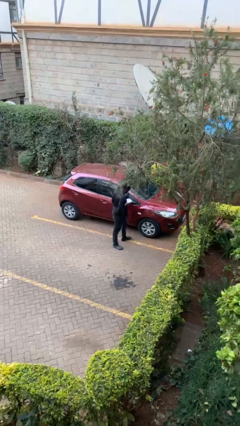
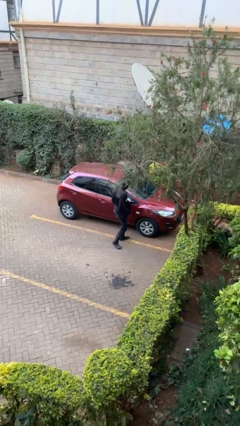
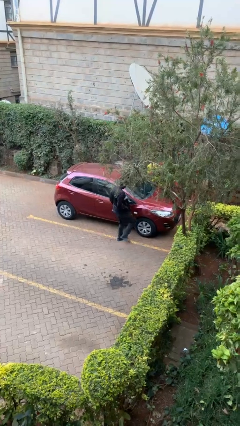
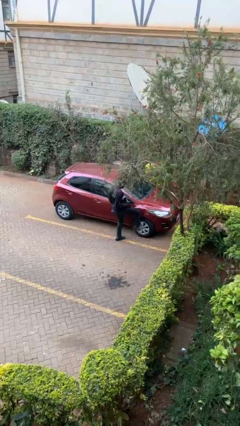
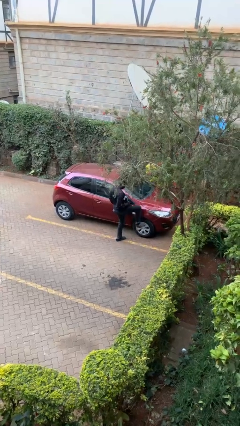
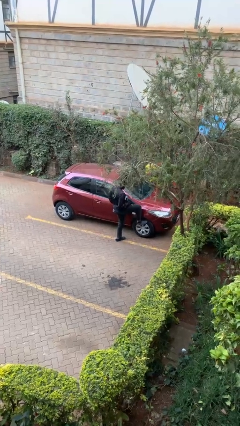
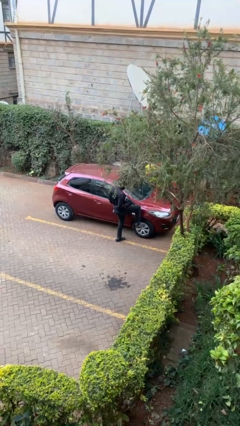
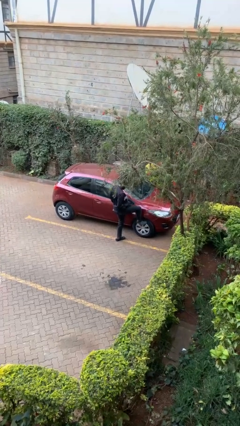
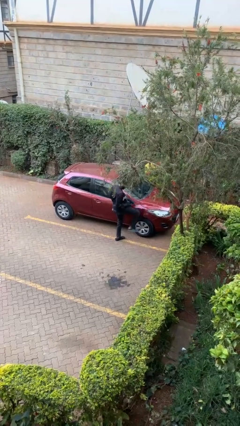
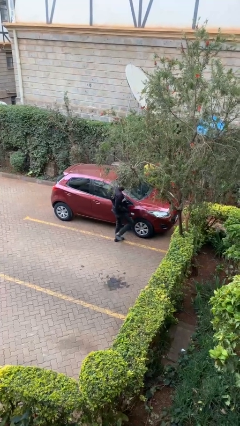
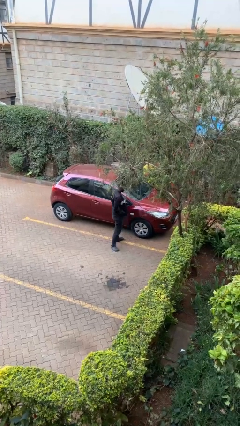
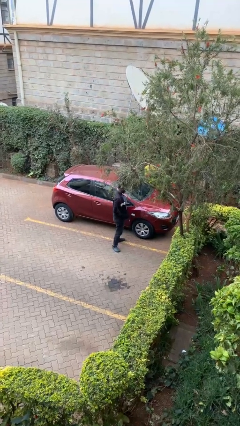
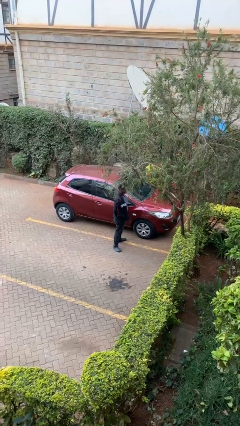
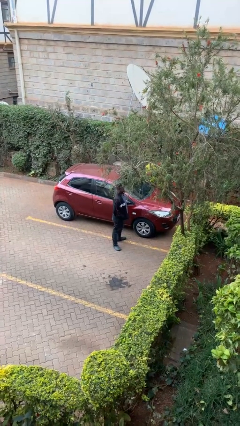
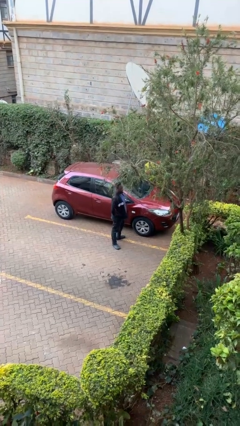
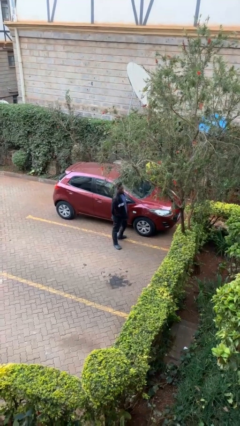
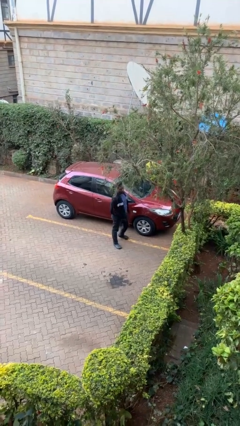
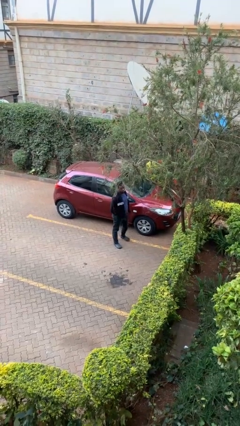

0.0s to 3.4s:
person kicks car tires

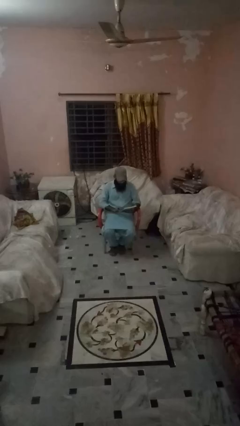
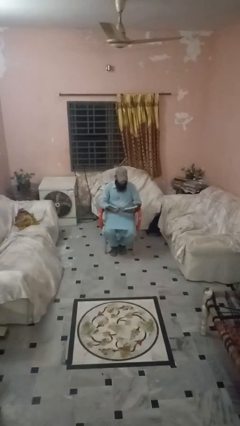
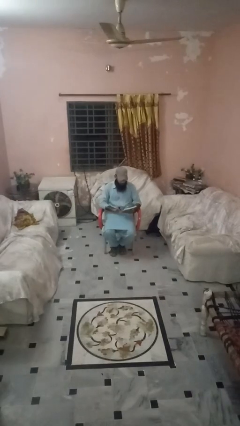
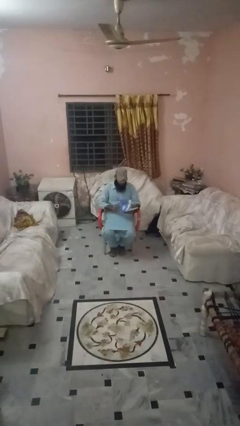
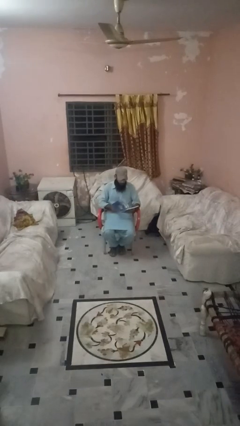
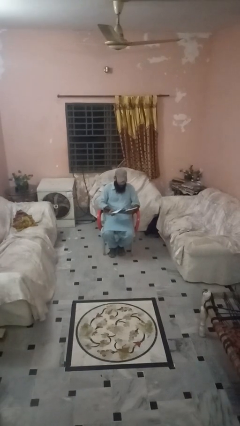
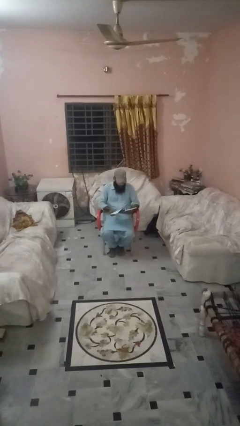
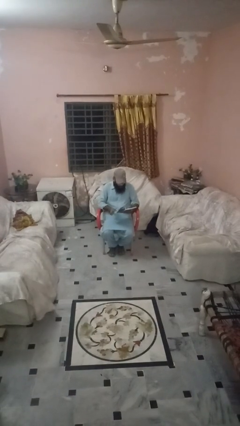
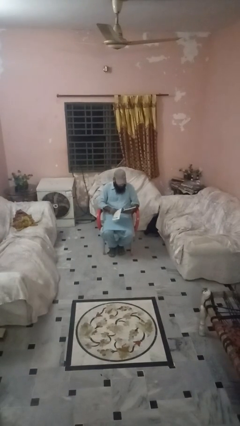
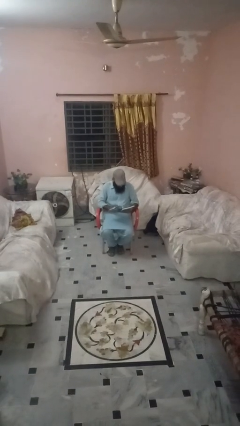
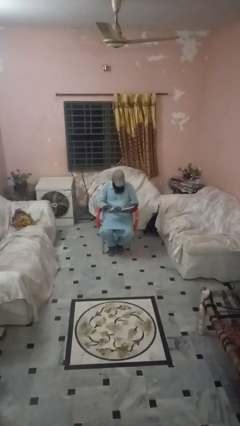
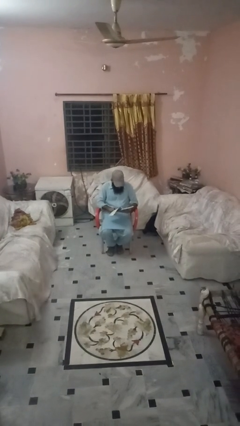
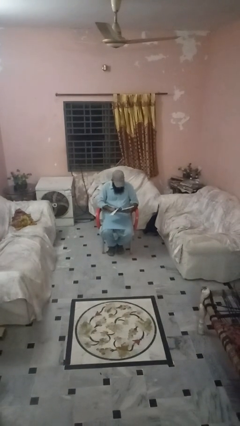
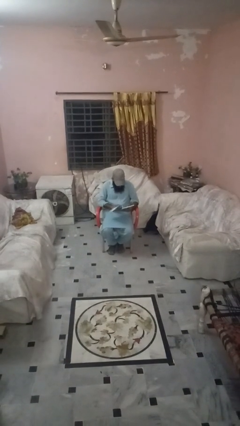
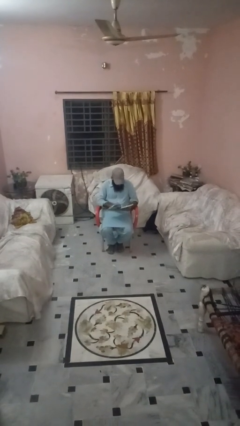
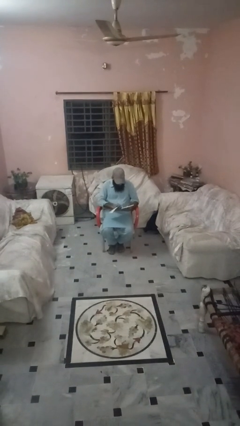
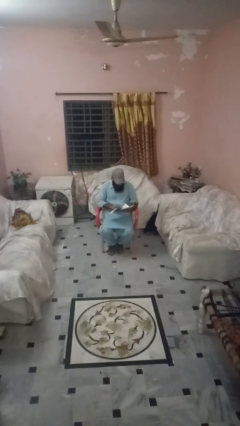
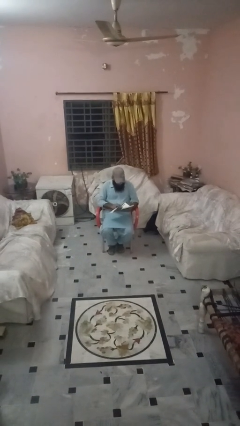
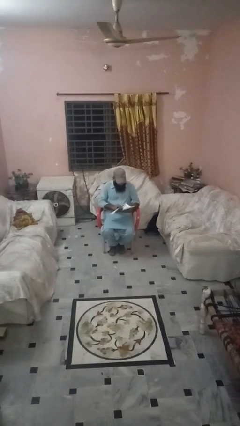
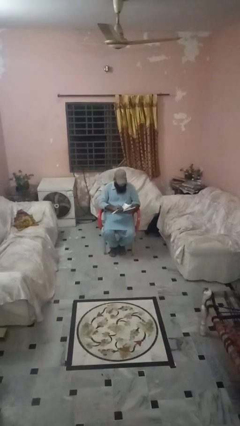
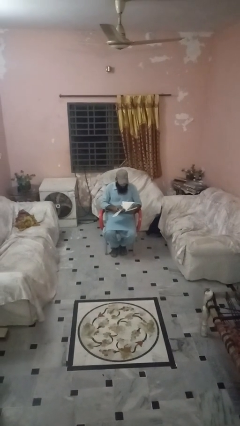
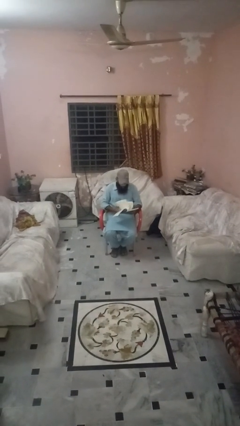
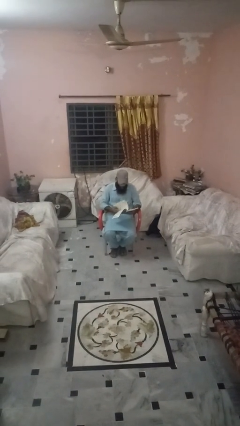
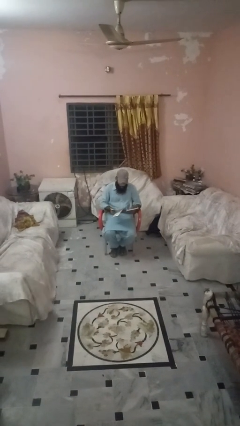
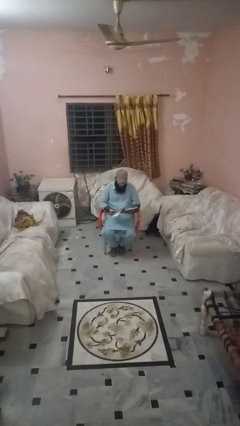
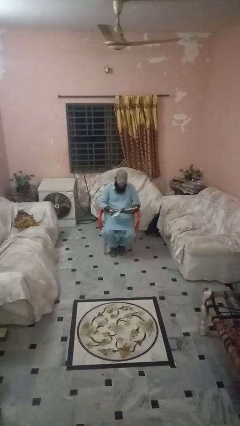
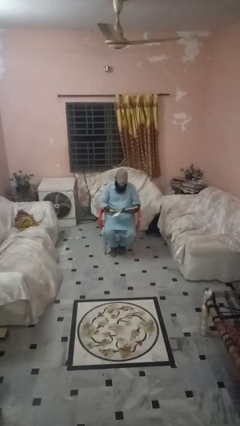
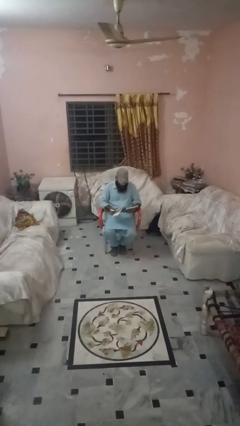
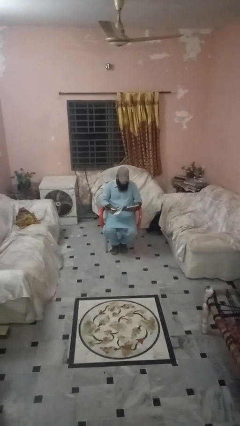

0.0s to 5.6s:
person reads book

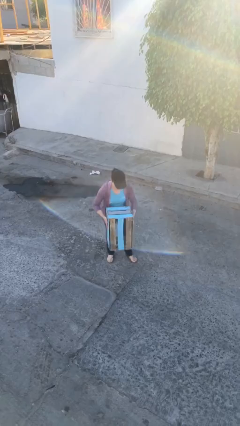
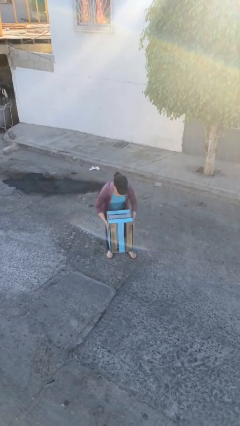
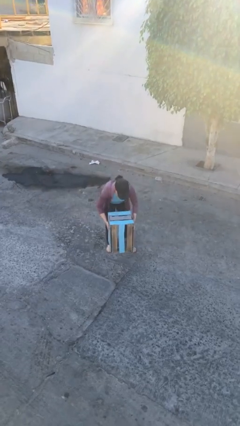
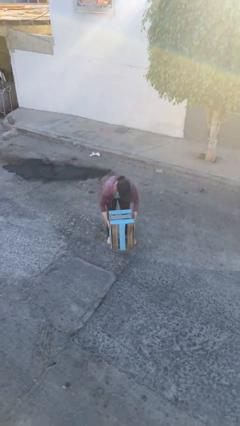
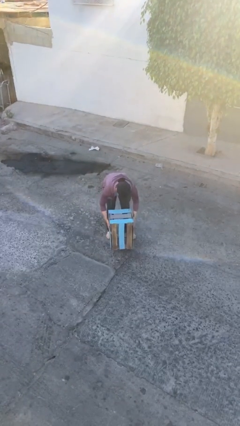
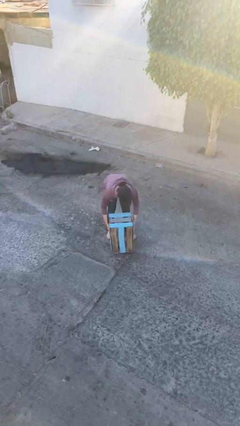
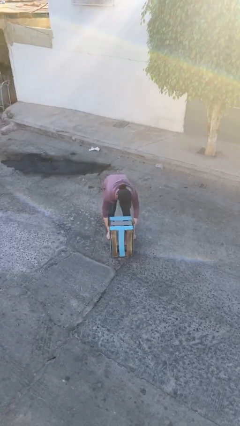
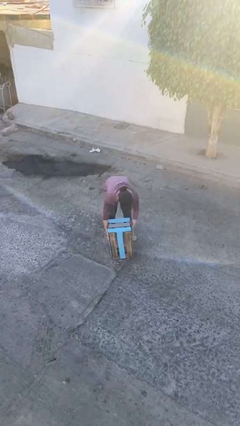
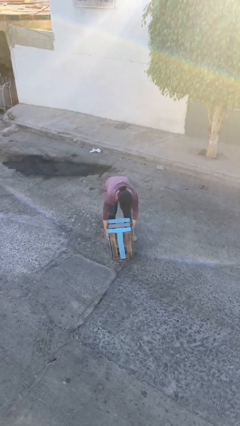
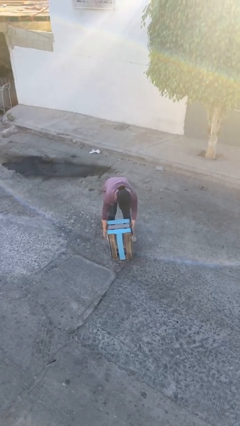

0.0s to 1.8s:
person puts down object on floor

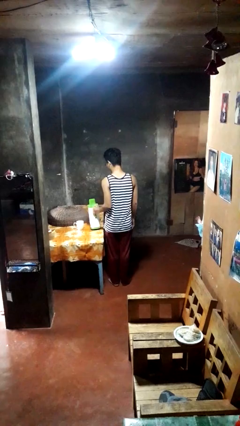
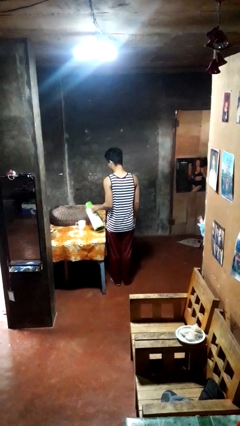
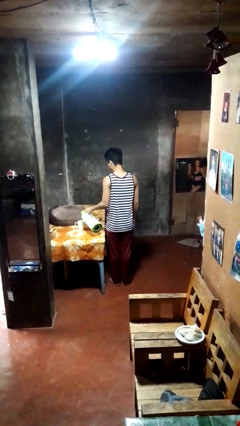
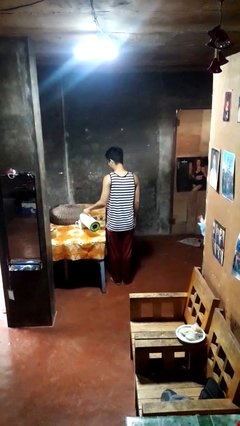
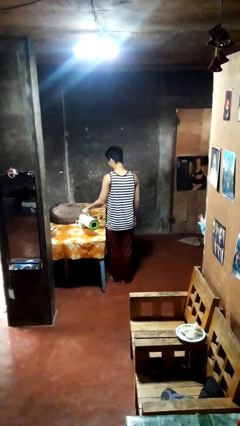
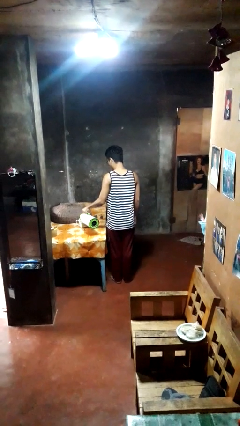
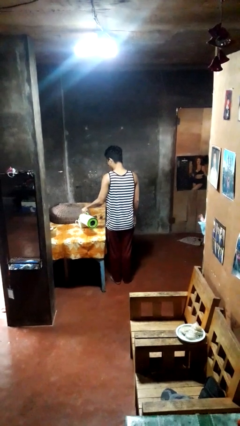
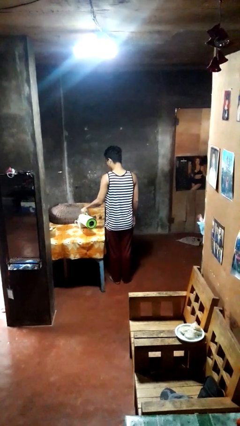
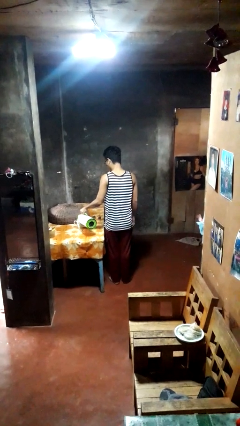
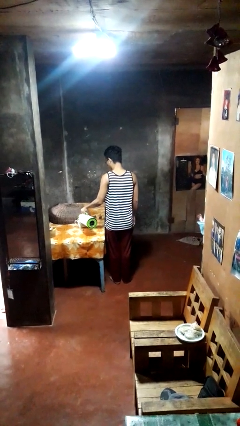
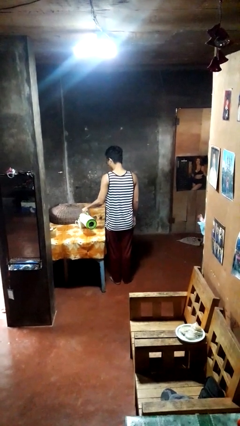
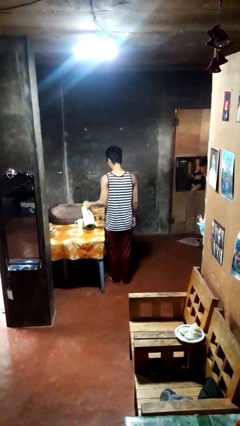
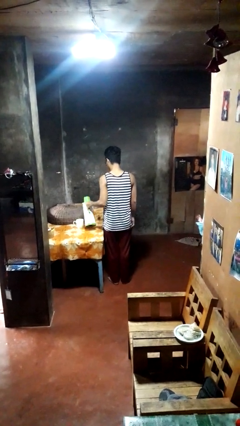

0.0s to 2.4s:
person pours coffee into mug

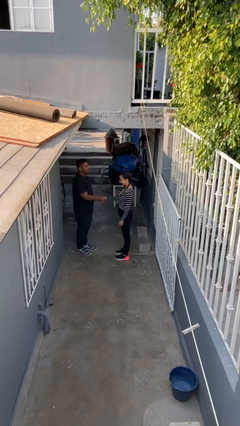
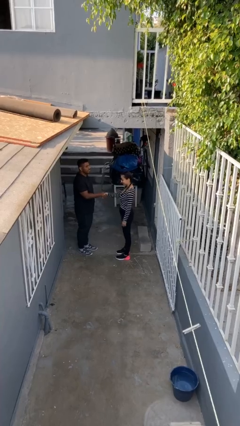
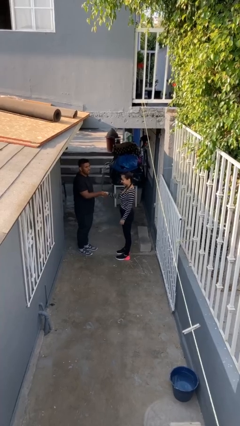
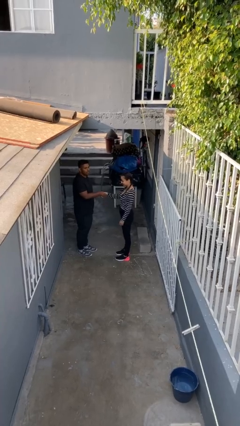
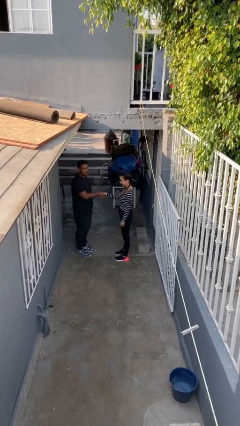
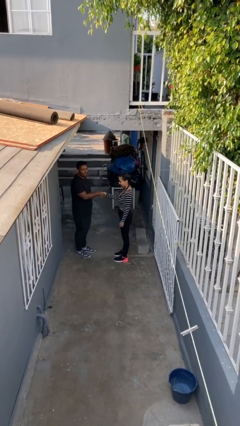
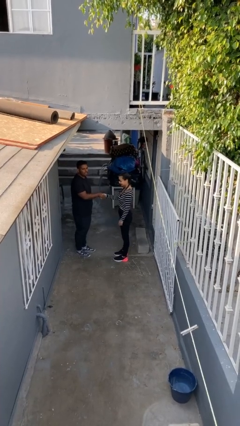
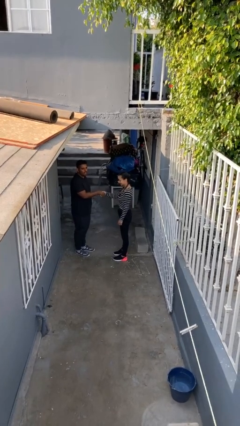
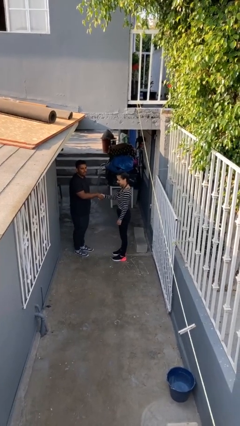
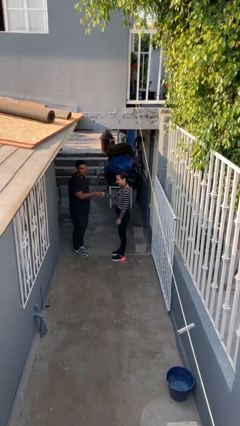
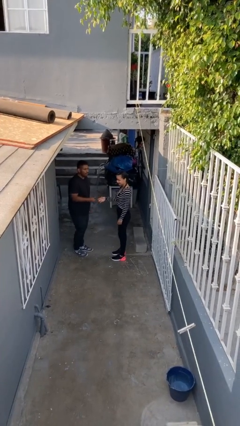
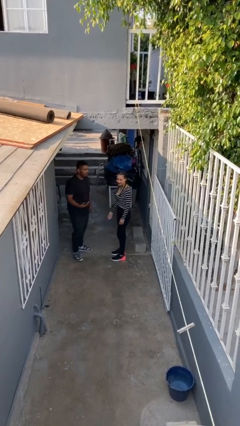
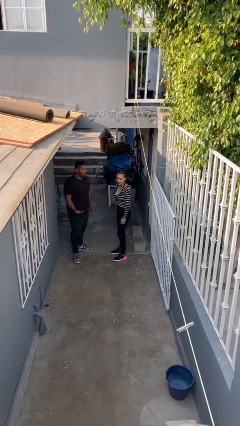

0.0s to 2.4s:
person shakes hand

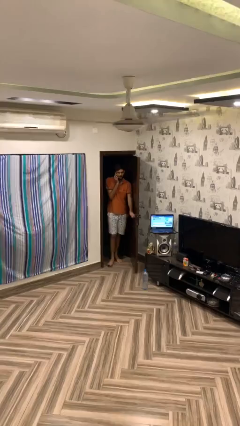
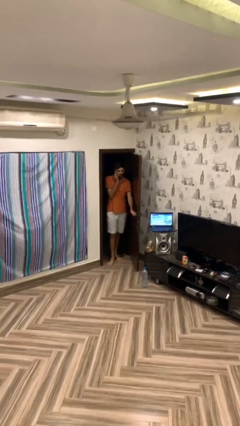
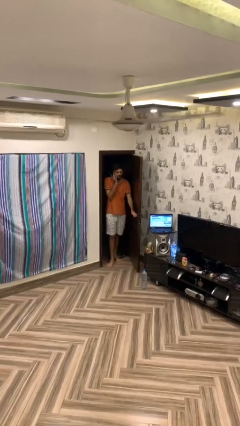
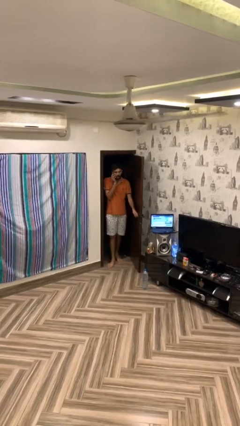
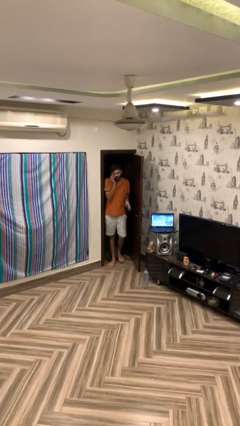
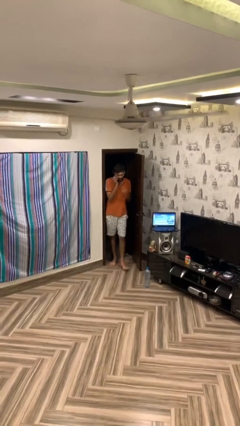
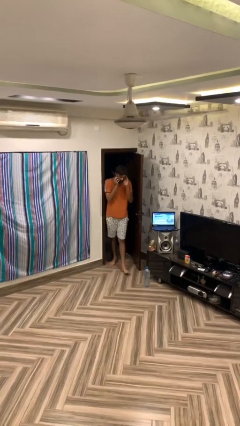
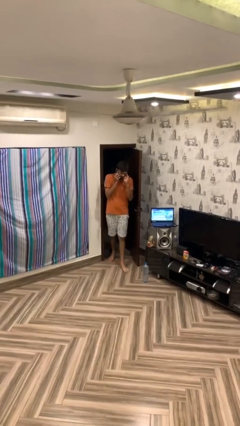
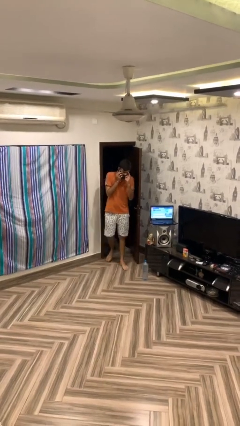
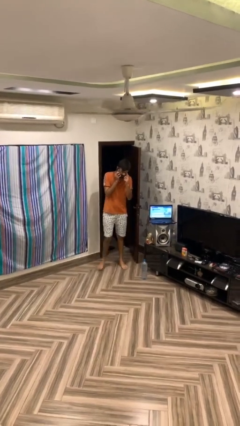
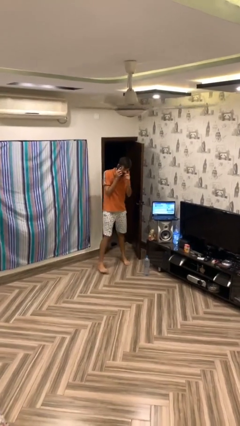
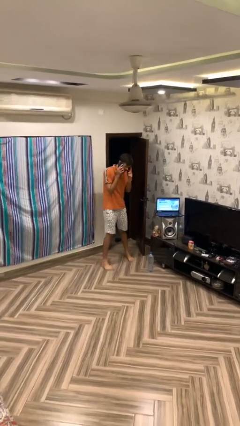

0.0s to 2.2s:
person enters scene through structure
